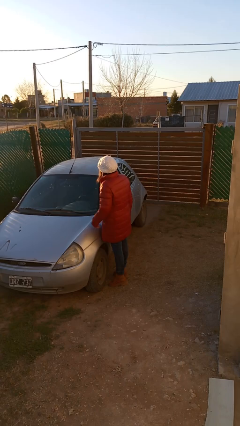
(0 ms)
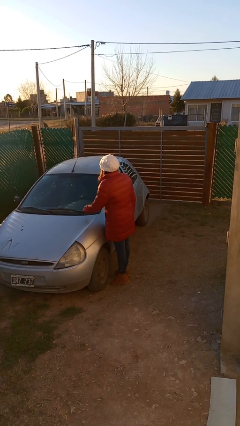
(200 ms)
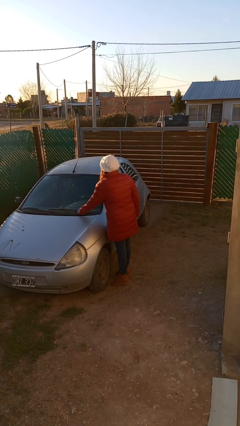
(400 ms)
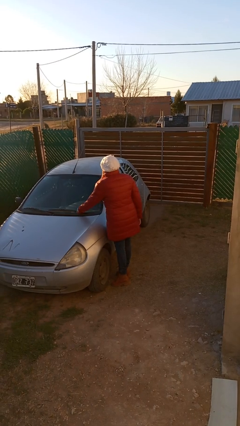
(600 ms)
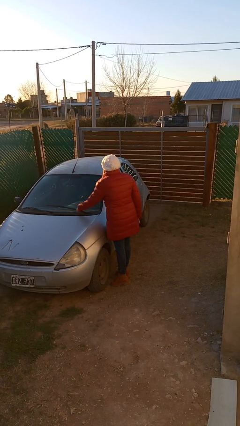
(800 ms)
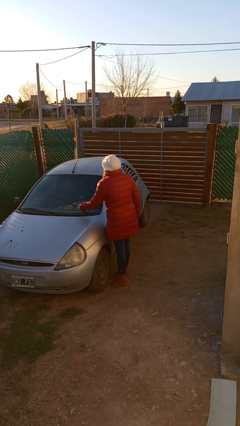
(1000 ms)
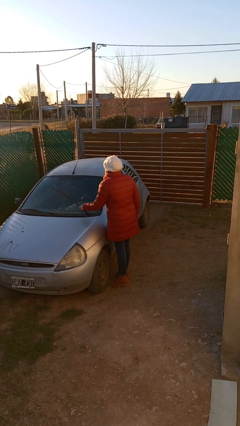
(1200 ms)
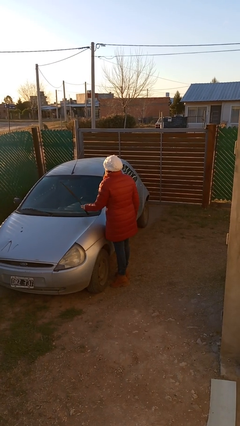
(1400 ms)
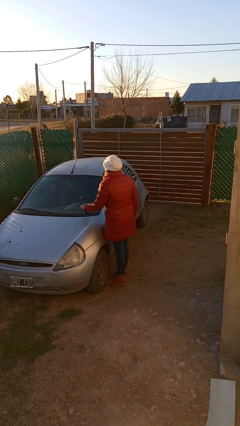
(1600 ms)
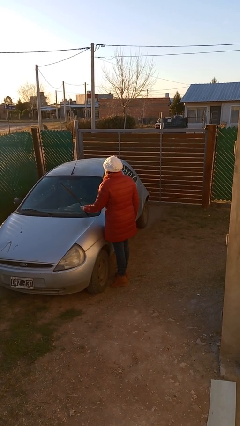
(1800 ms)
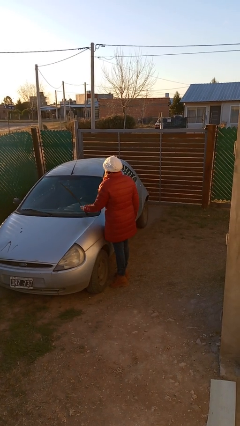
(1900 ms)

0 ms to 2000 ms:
person flips up car wipers

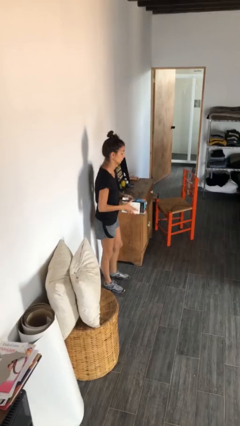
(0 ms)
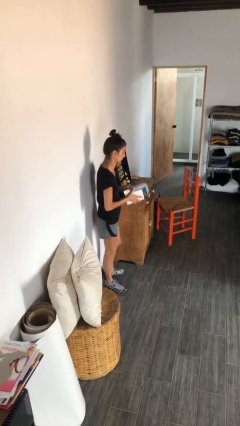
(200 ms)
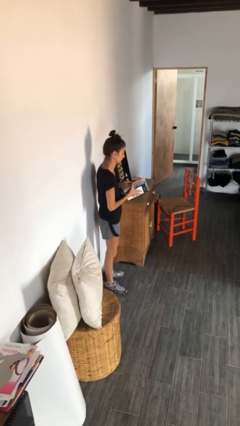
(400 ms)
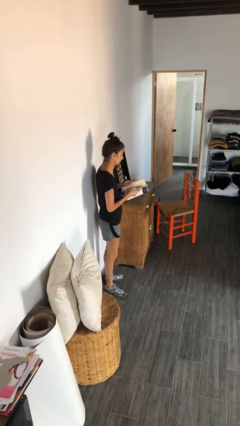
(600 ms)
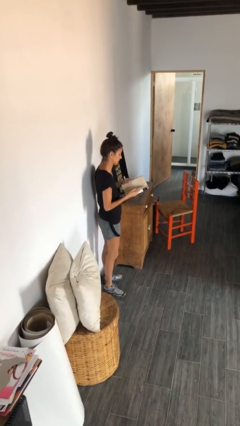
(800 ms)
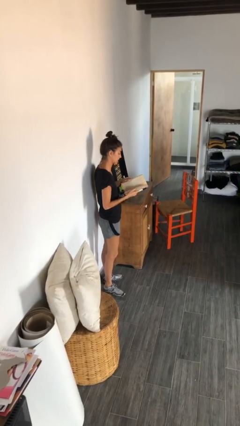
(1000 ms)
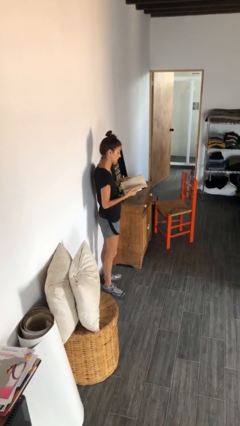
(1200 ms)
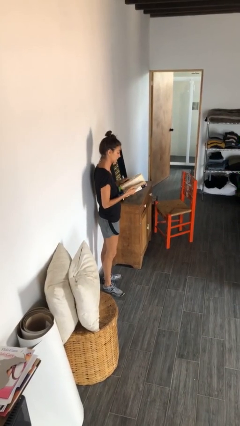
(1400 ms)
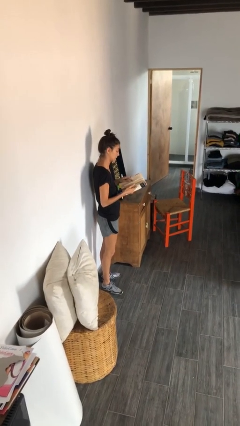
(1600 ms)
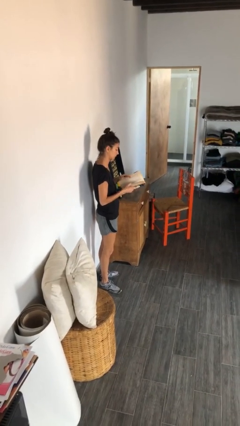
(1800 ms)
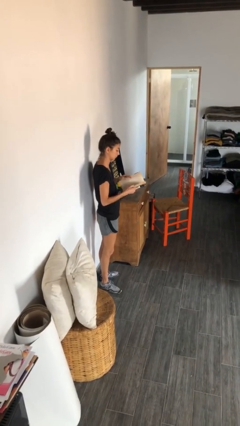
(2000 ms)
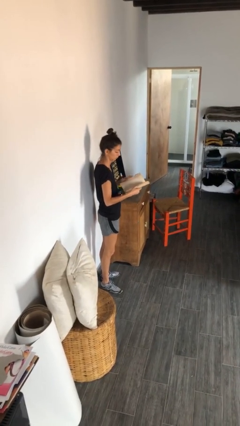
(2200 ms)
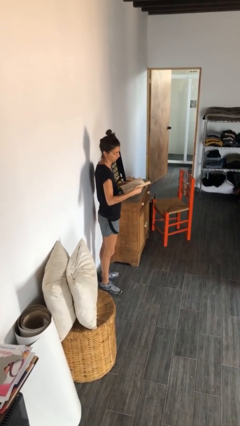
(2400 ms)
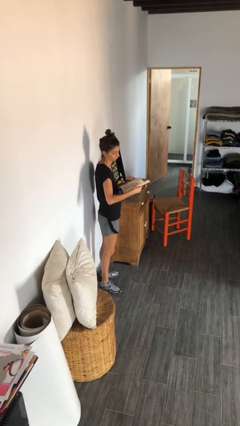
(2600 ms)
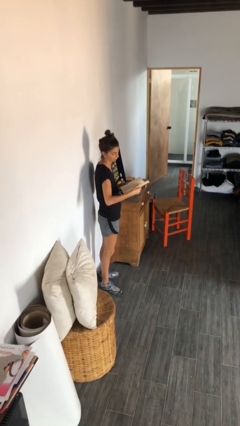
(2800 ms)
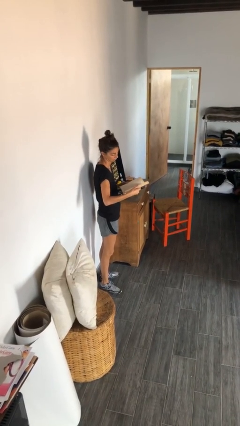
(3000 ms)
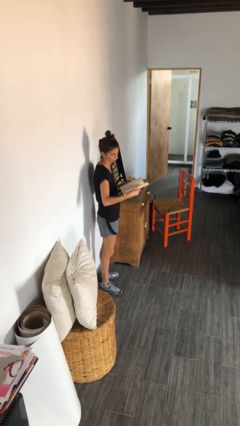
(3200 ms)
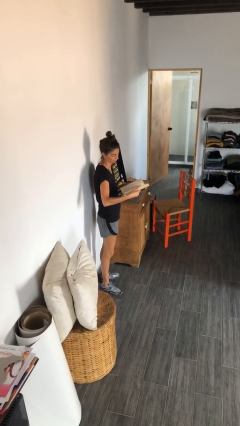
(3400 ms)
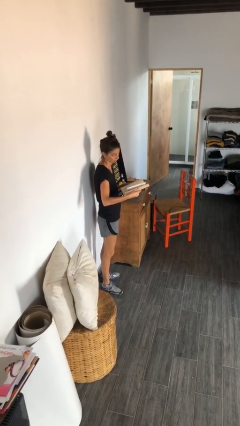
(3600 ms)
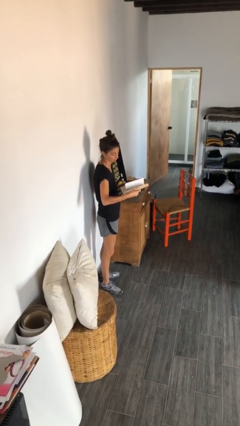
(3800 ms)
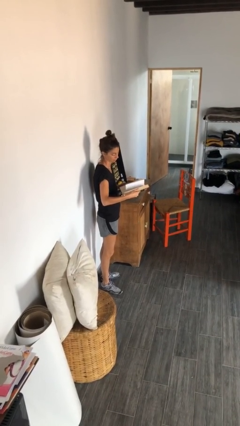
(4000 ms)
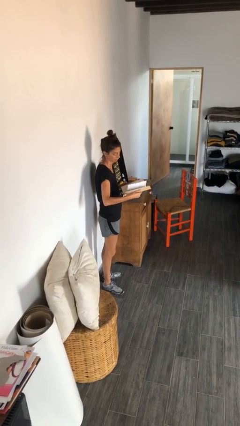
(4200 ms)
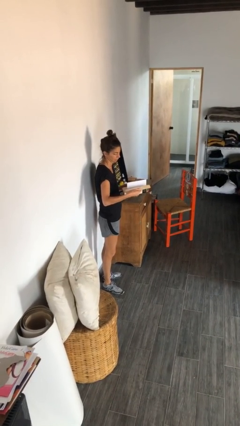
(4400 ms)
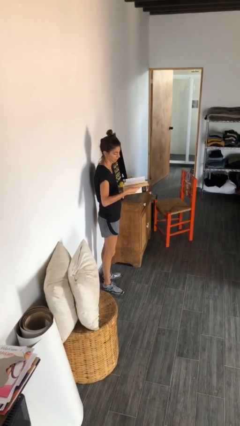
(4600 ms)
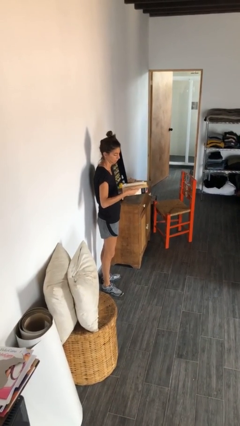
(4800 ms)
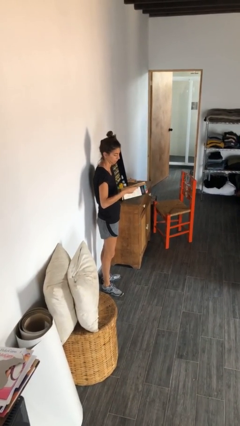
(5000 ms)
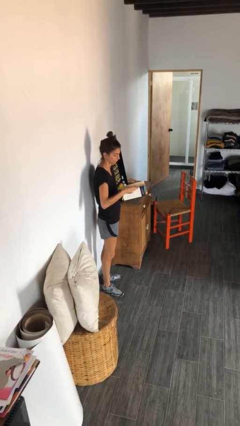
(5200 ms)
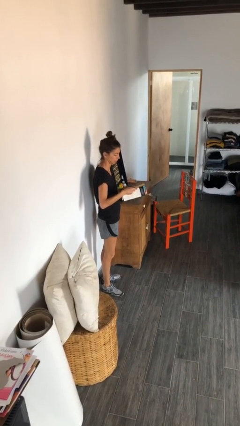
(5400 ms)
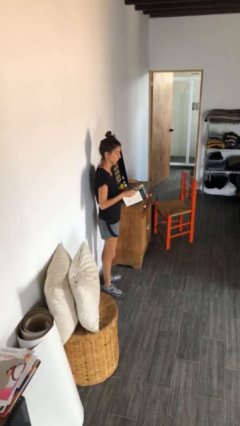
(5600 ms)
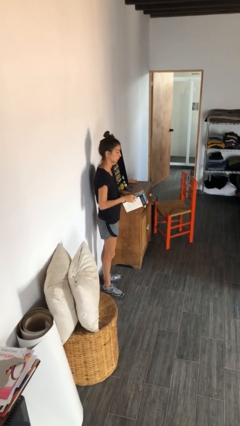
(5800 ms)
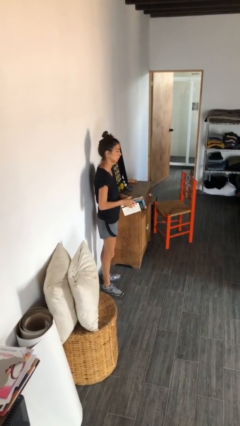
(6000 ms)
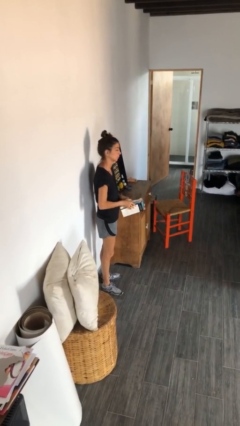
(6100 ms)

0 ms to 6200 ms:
person reads book

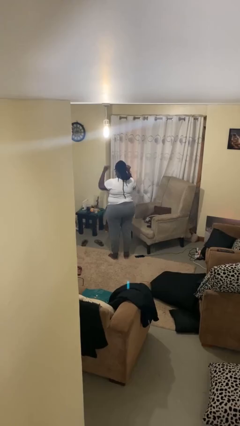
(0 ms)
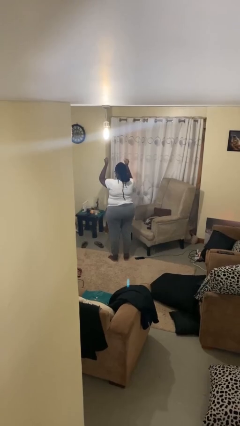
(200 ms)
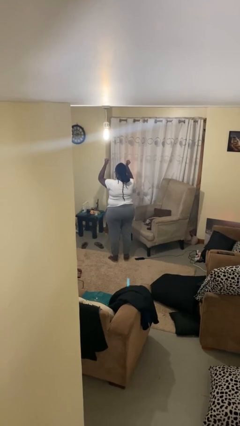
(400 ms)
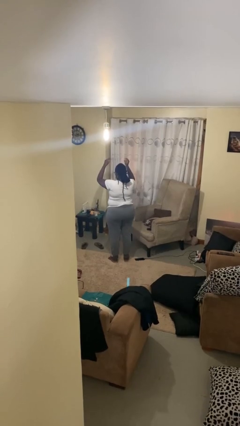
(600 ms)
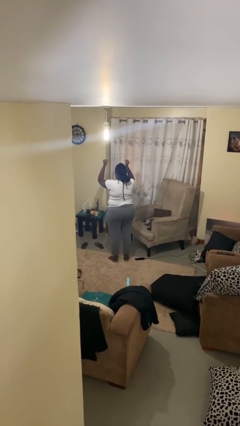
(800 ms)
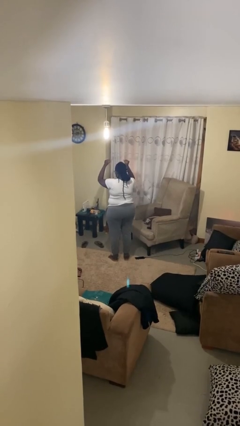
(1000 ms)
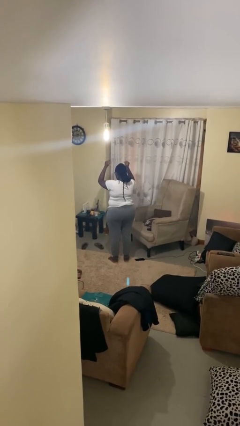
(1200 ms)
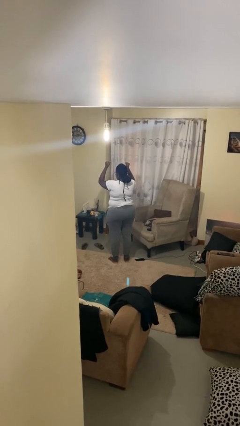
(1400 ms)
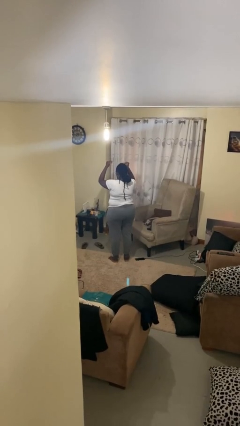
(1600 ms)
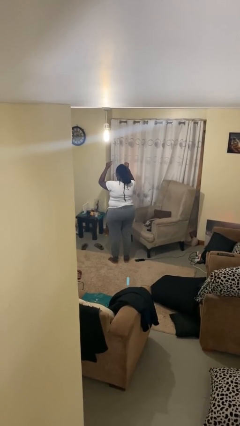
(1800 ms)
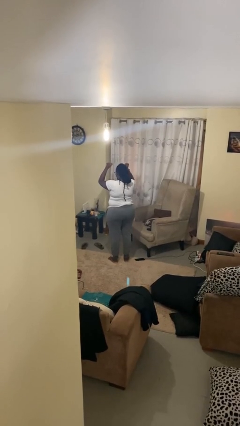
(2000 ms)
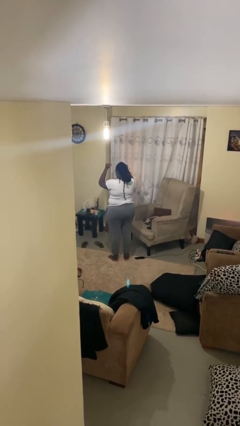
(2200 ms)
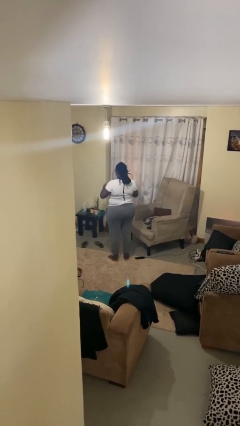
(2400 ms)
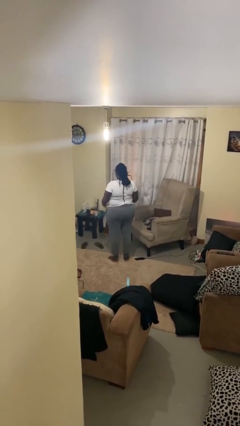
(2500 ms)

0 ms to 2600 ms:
person snaps fingers

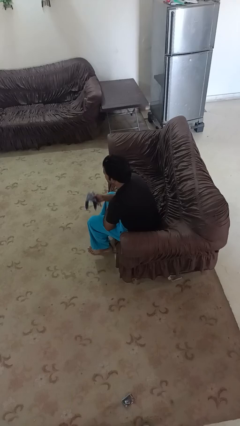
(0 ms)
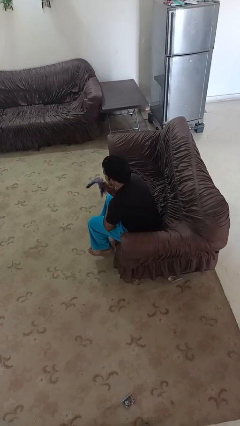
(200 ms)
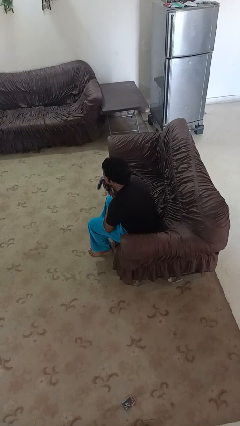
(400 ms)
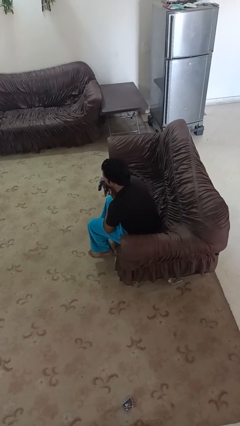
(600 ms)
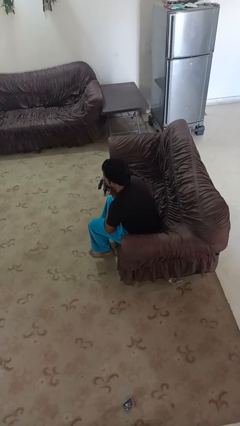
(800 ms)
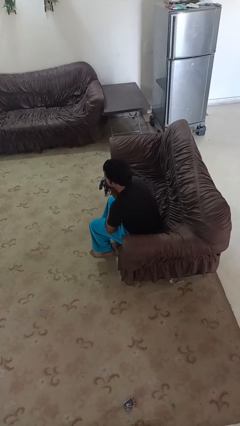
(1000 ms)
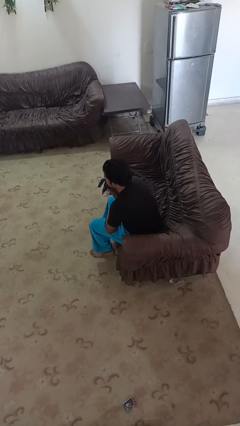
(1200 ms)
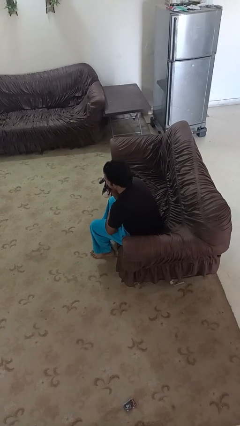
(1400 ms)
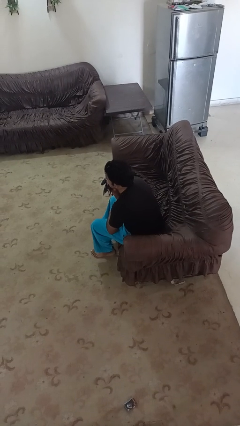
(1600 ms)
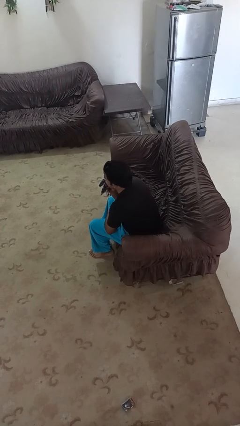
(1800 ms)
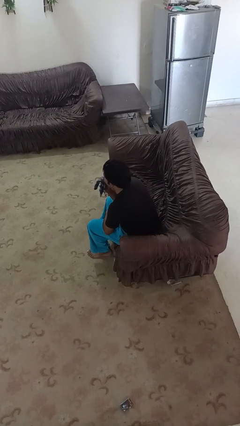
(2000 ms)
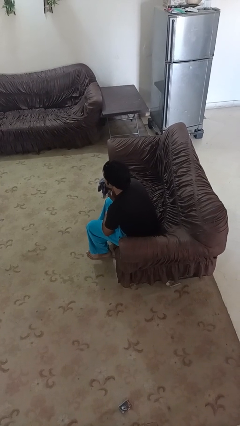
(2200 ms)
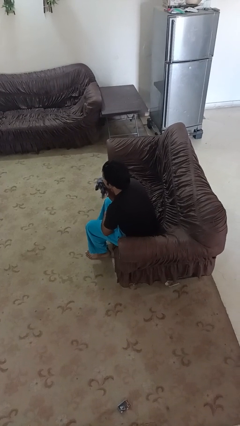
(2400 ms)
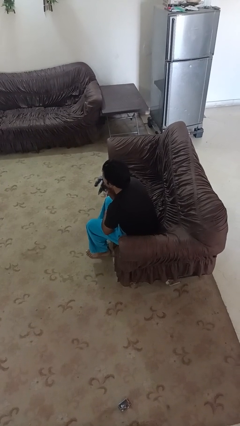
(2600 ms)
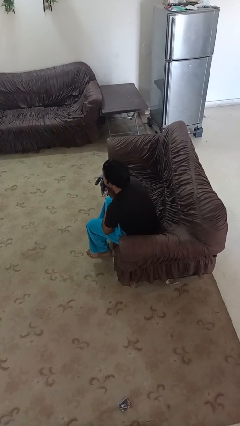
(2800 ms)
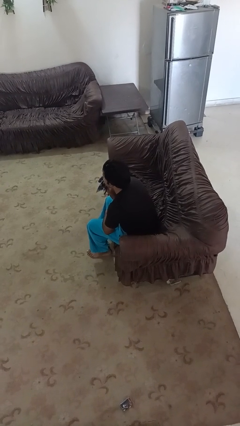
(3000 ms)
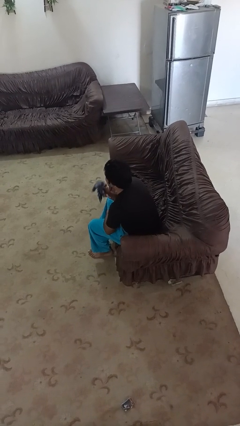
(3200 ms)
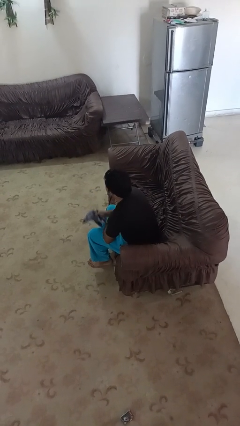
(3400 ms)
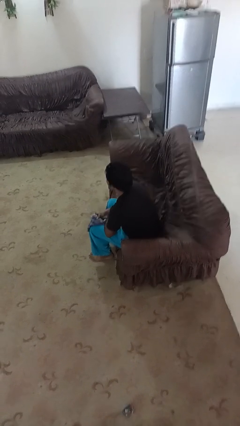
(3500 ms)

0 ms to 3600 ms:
person wipes mouth with napkin

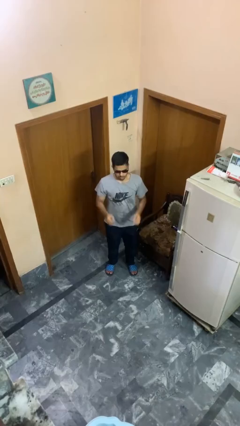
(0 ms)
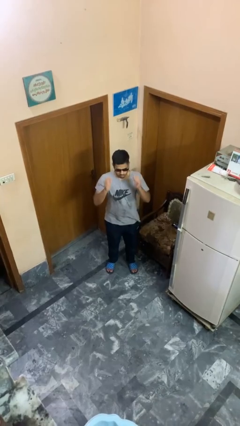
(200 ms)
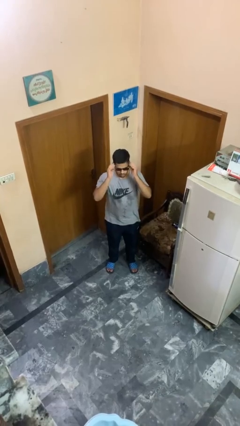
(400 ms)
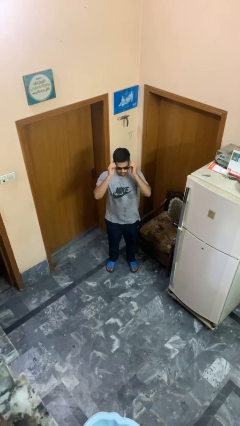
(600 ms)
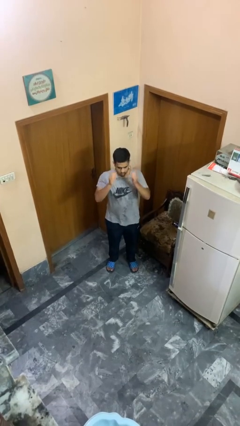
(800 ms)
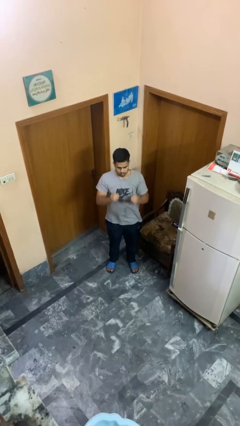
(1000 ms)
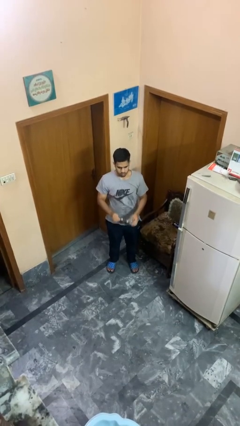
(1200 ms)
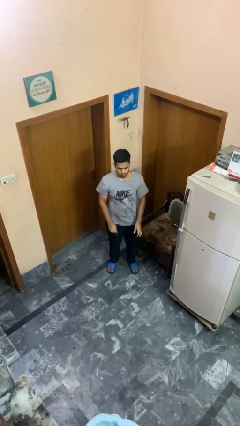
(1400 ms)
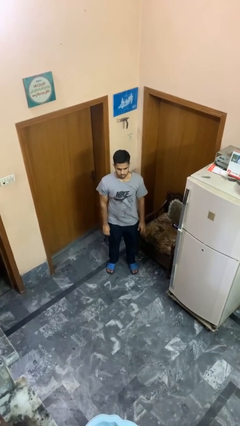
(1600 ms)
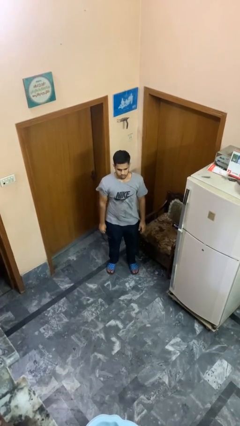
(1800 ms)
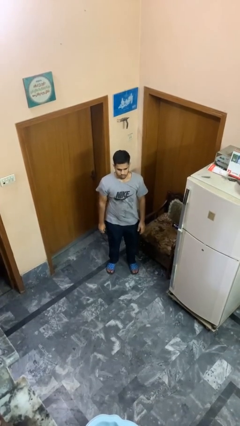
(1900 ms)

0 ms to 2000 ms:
person takes off sunglasses

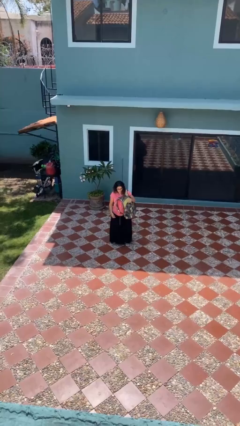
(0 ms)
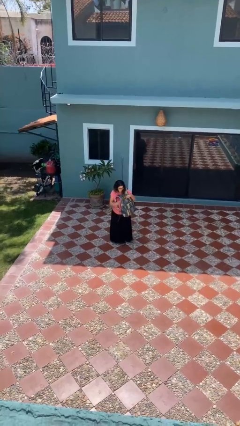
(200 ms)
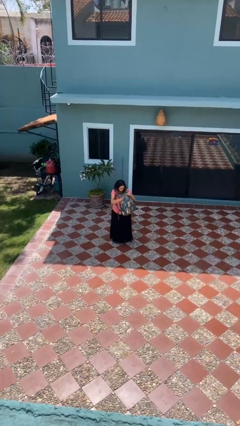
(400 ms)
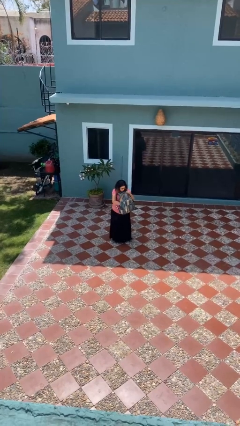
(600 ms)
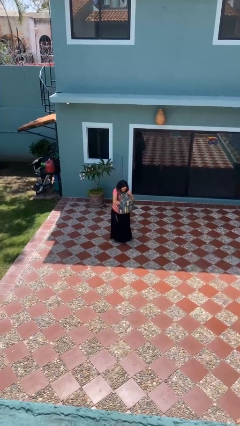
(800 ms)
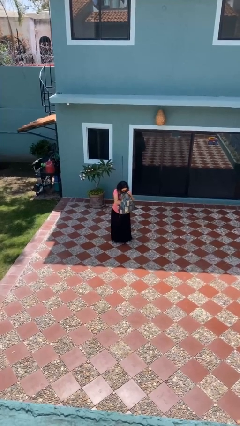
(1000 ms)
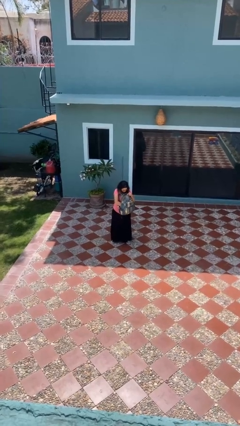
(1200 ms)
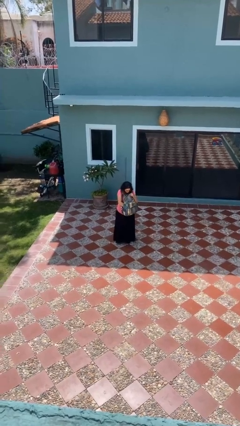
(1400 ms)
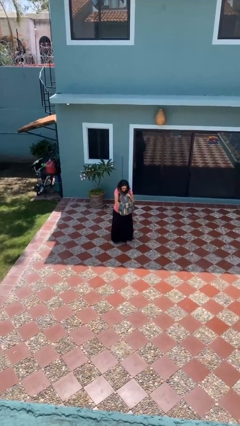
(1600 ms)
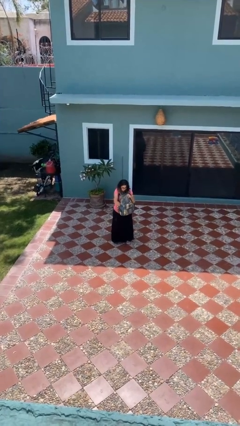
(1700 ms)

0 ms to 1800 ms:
person searches in backpack
